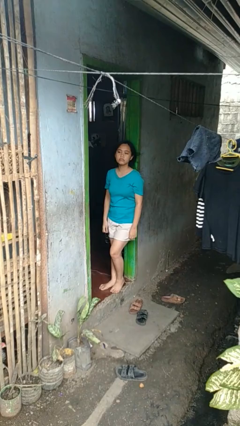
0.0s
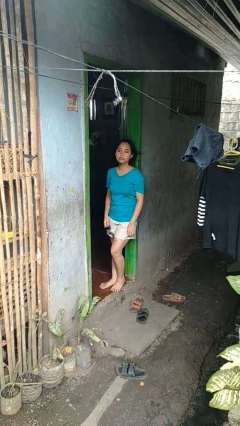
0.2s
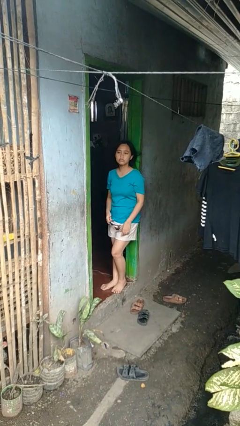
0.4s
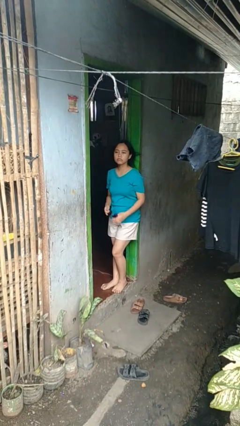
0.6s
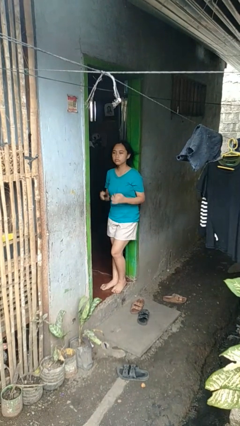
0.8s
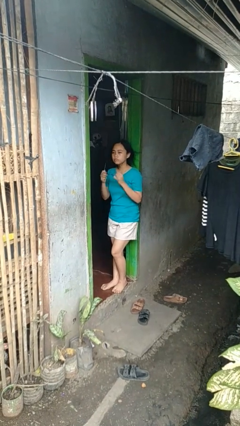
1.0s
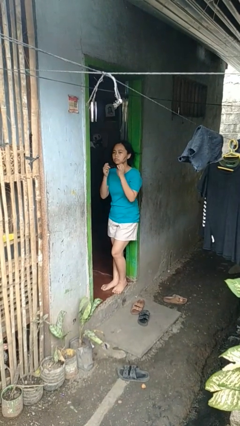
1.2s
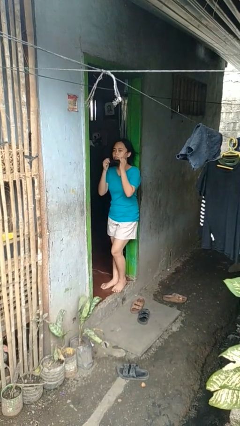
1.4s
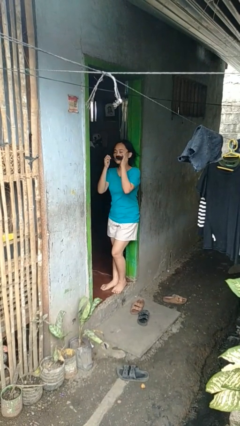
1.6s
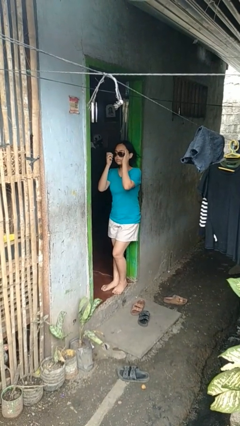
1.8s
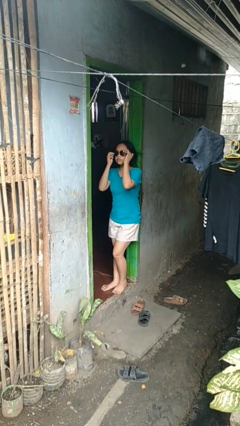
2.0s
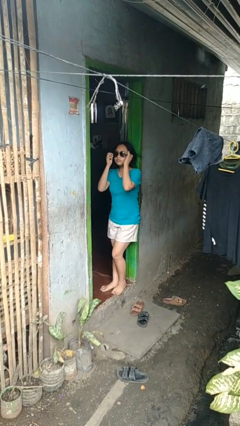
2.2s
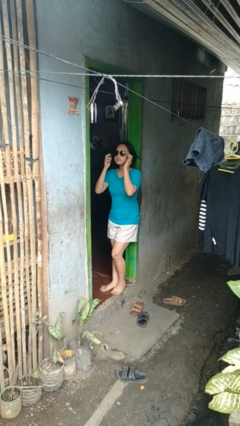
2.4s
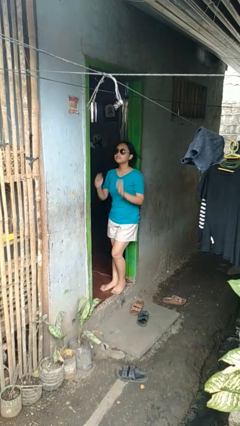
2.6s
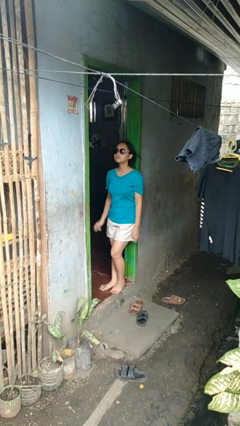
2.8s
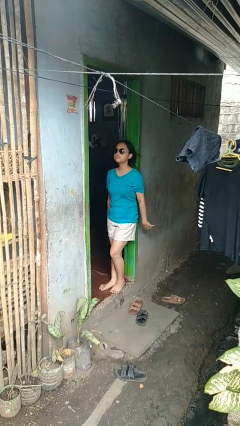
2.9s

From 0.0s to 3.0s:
person puts on sunglasses

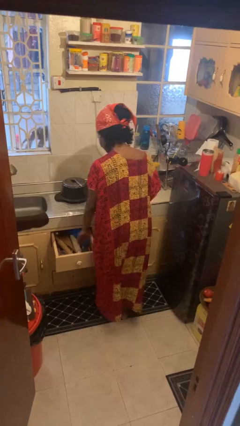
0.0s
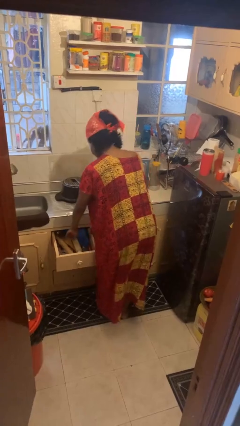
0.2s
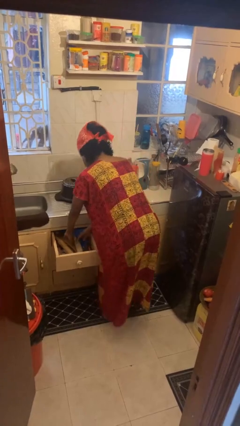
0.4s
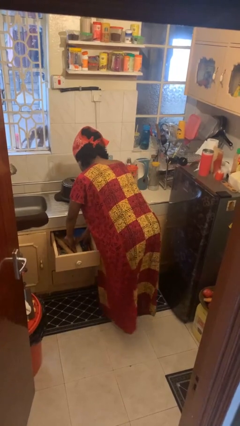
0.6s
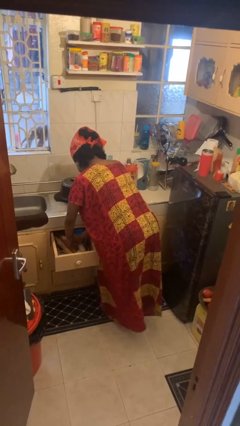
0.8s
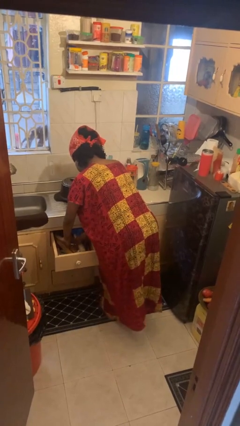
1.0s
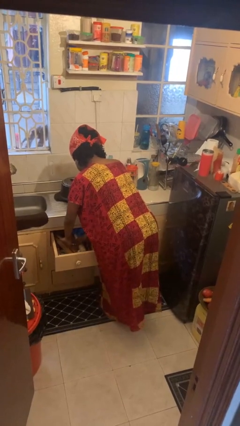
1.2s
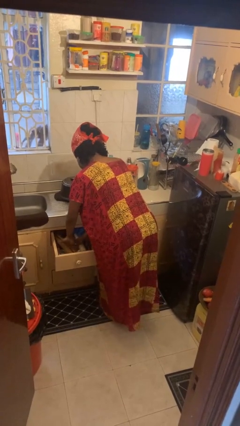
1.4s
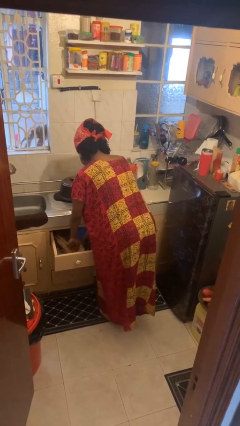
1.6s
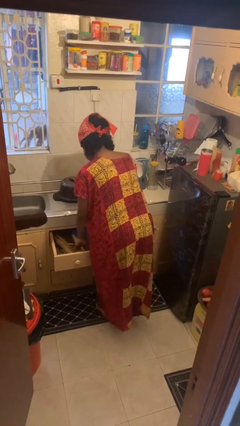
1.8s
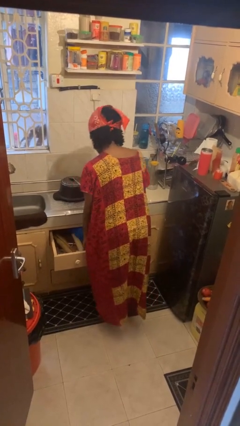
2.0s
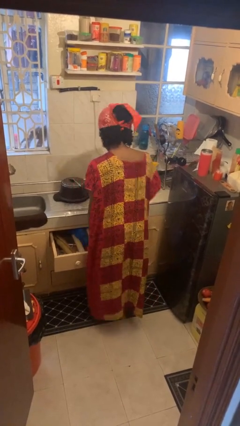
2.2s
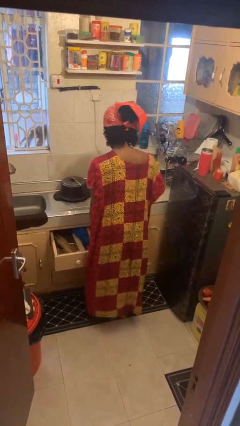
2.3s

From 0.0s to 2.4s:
person searches in kitchen drawer

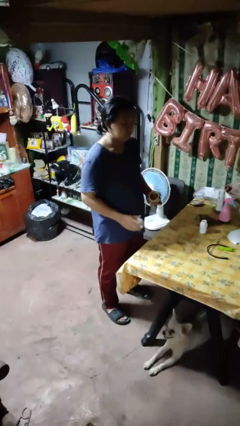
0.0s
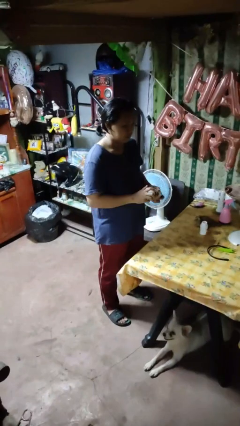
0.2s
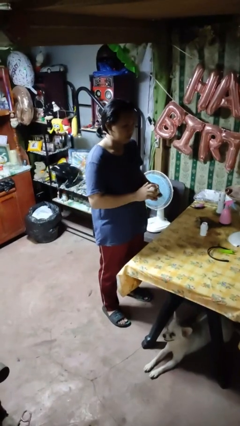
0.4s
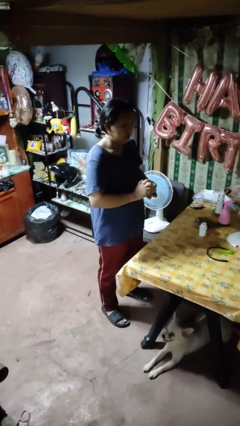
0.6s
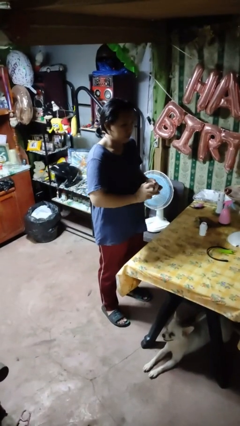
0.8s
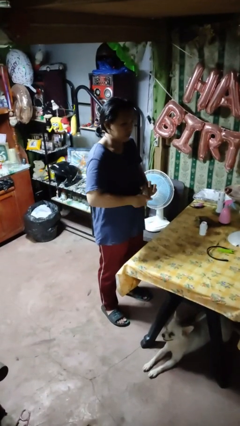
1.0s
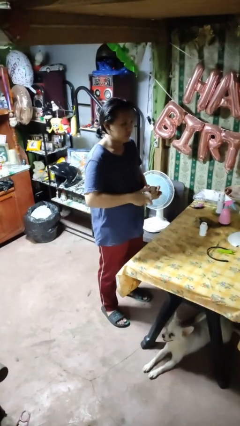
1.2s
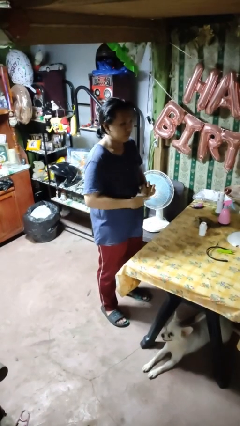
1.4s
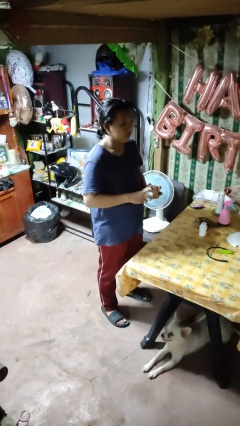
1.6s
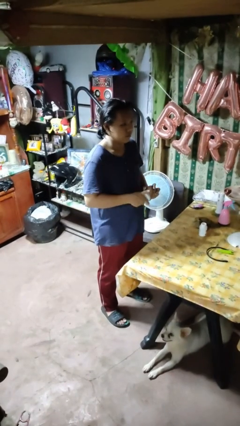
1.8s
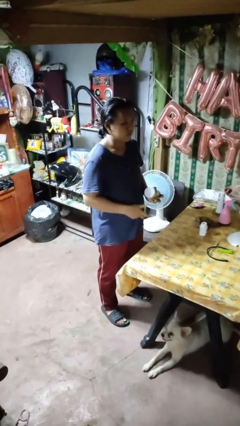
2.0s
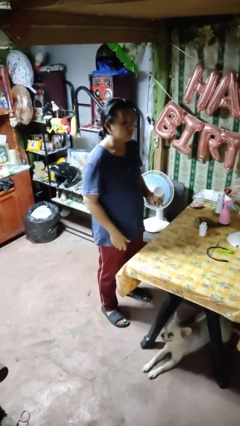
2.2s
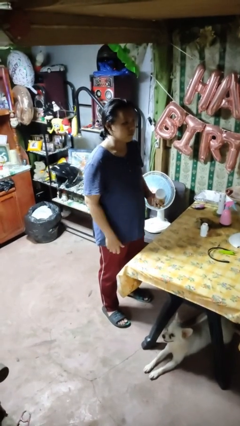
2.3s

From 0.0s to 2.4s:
person closes jar

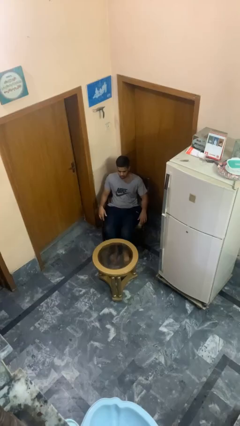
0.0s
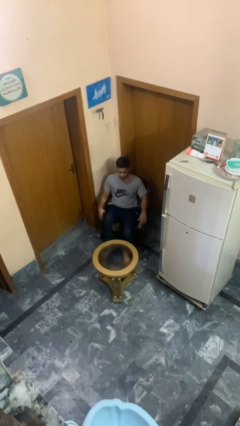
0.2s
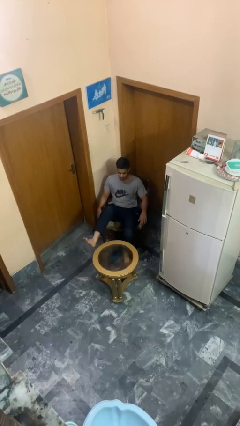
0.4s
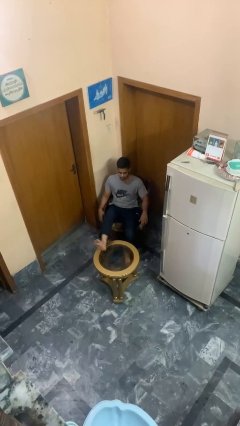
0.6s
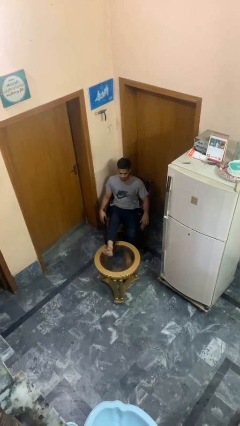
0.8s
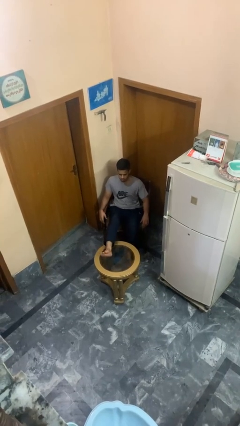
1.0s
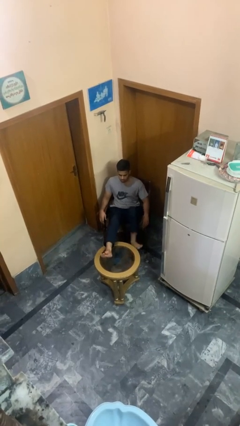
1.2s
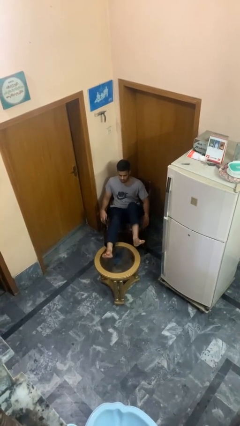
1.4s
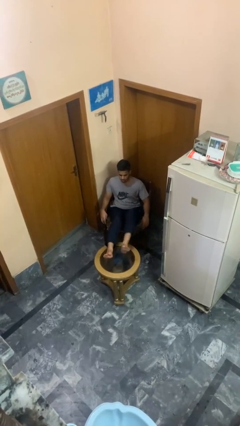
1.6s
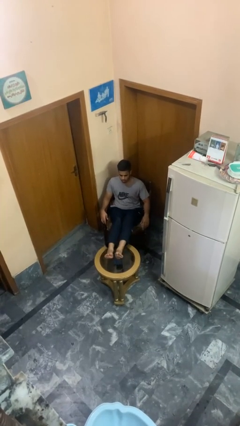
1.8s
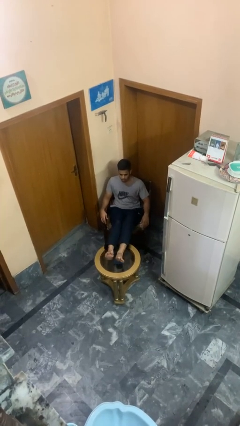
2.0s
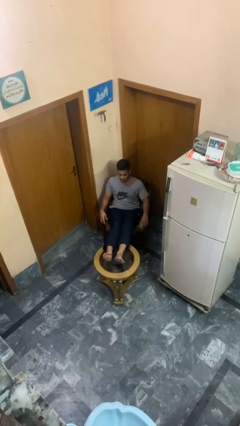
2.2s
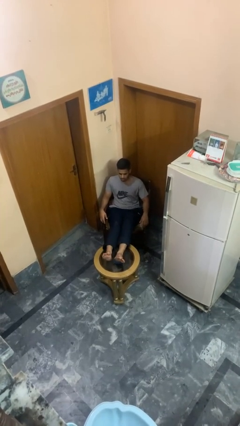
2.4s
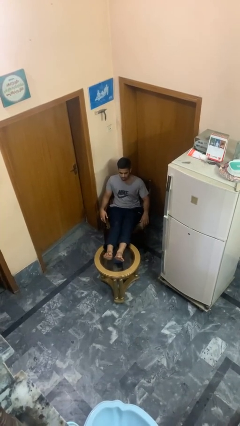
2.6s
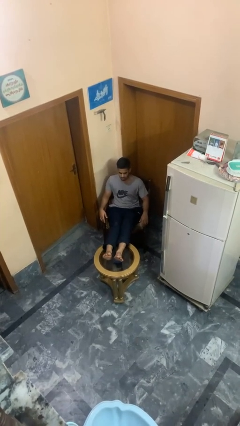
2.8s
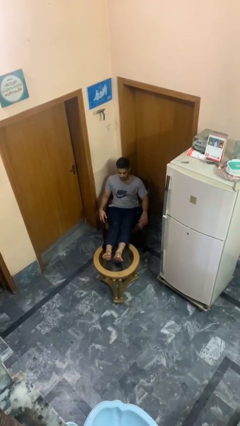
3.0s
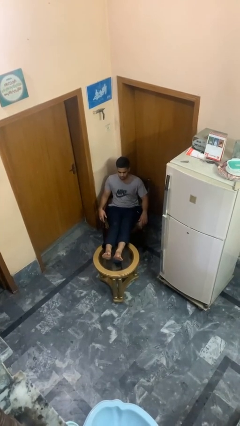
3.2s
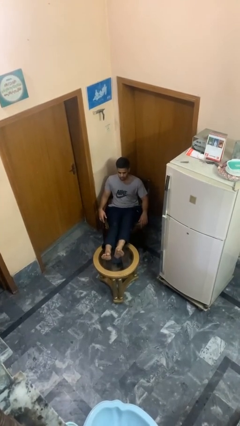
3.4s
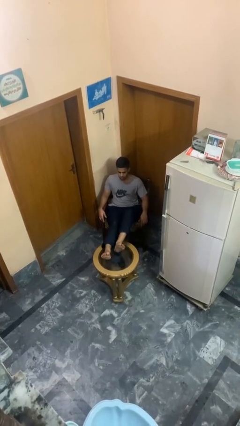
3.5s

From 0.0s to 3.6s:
person puts feet up

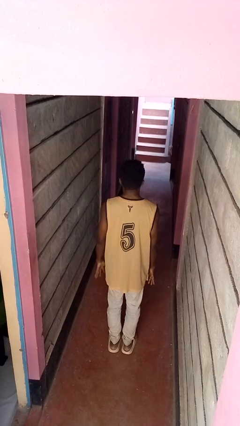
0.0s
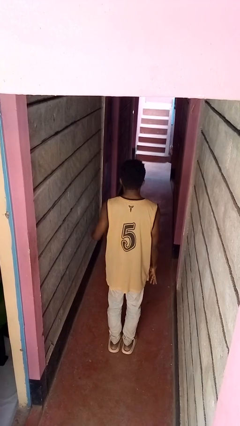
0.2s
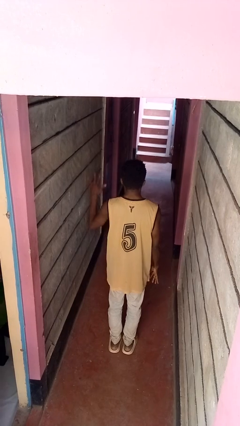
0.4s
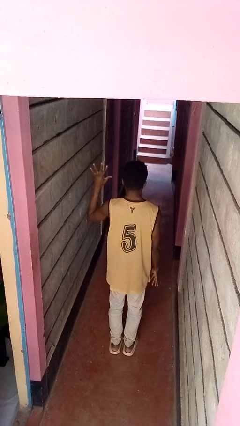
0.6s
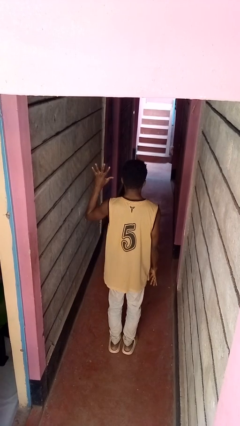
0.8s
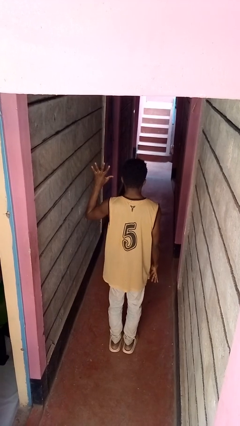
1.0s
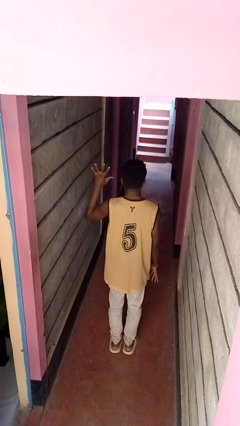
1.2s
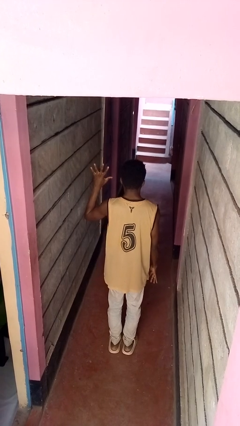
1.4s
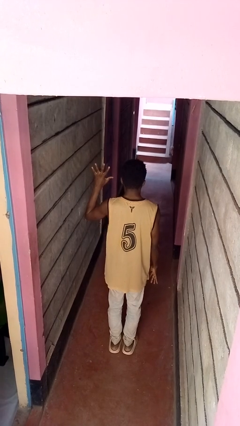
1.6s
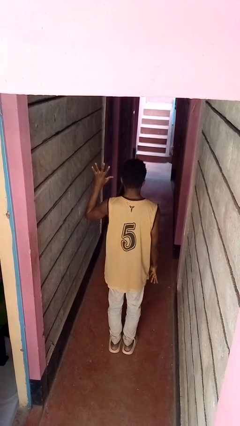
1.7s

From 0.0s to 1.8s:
person gestures number five

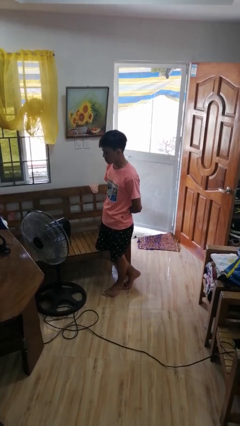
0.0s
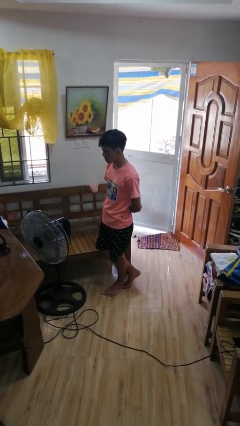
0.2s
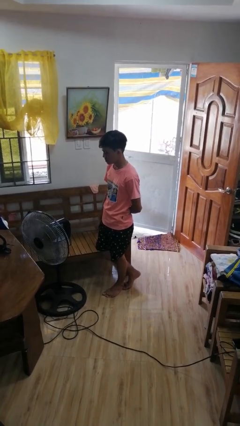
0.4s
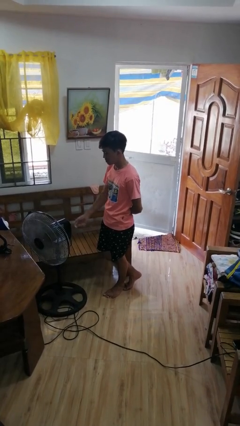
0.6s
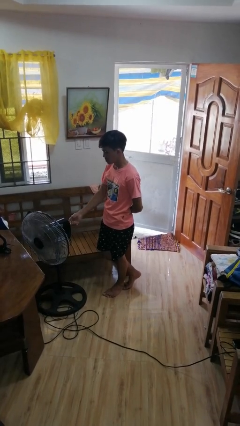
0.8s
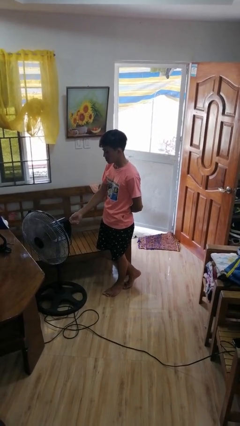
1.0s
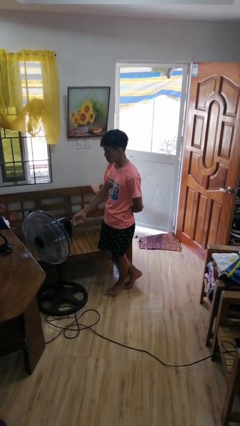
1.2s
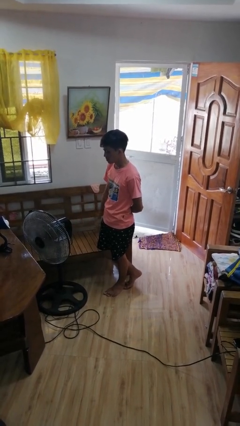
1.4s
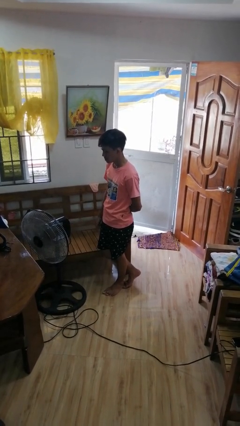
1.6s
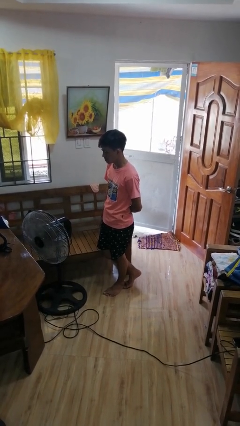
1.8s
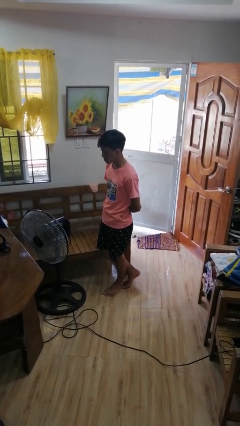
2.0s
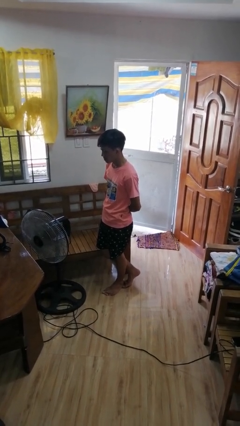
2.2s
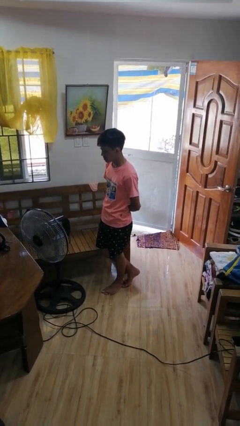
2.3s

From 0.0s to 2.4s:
person turns on fan

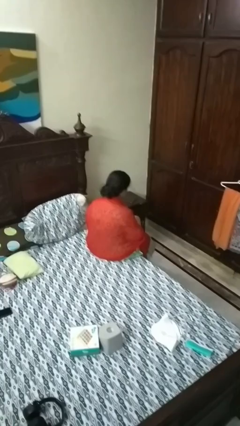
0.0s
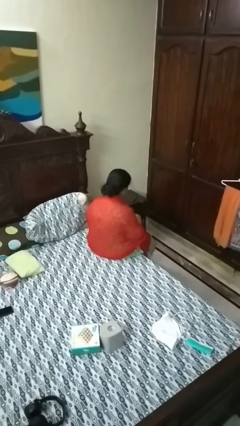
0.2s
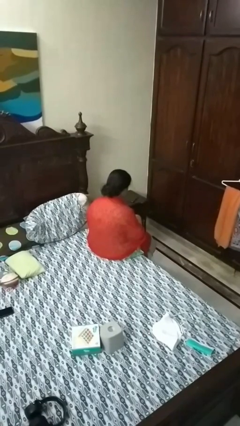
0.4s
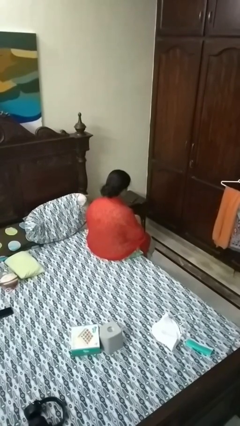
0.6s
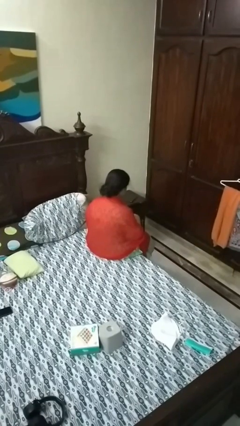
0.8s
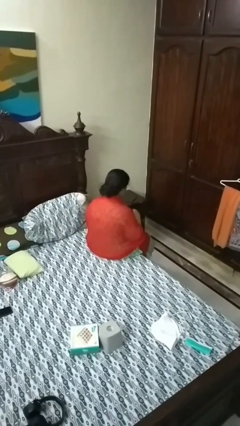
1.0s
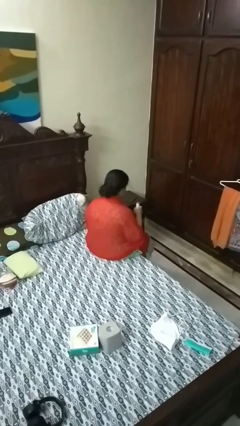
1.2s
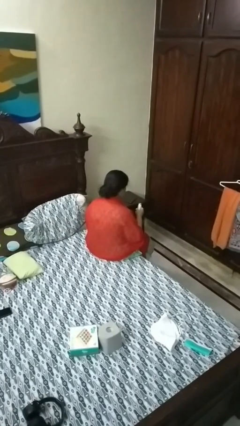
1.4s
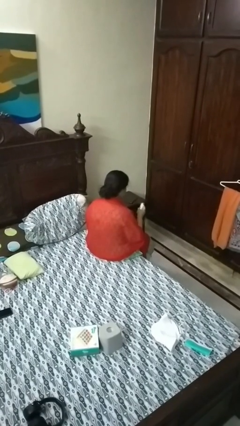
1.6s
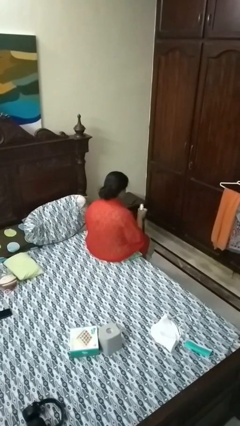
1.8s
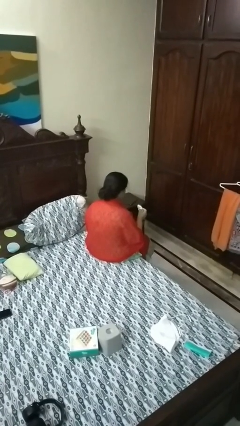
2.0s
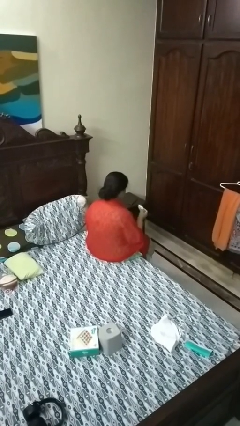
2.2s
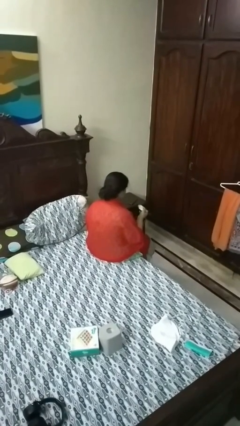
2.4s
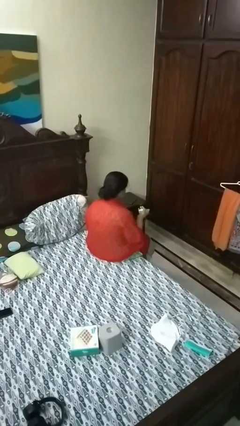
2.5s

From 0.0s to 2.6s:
person takes object from purse
